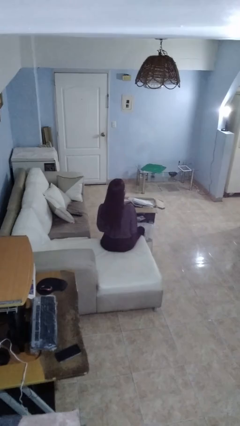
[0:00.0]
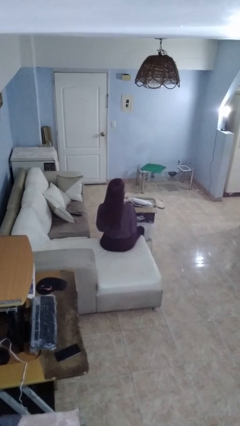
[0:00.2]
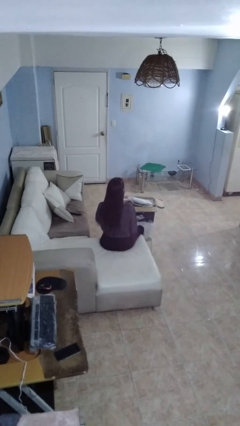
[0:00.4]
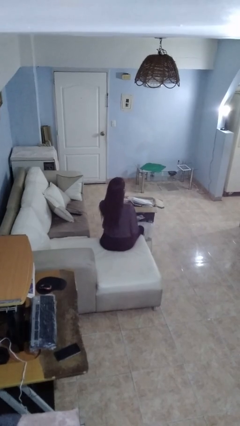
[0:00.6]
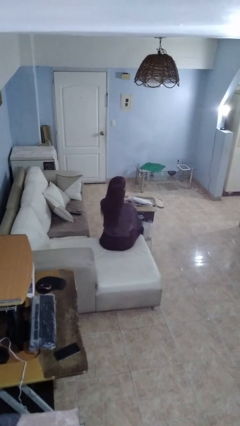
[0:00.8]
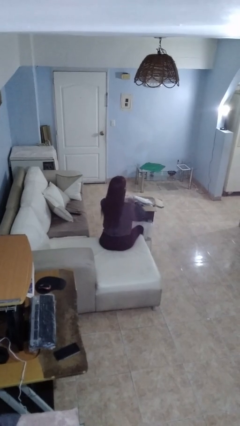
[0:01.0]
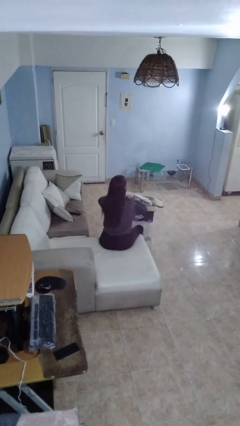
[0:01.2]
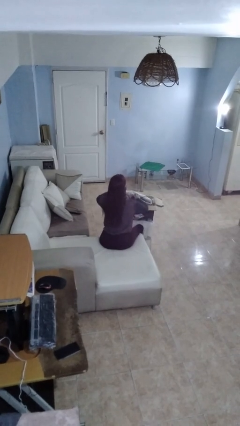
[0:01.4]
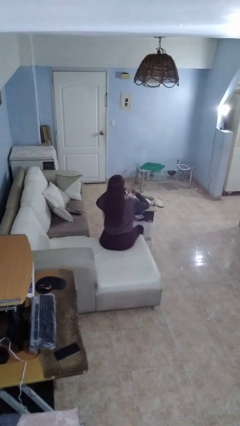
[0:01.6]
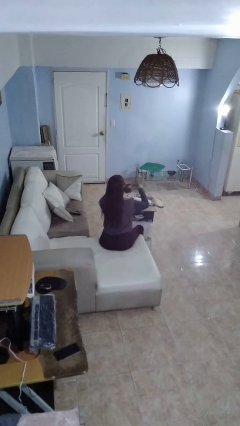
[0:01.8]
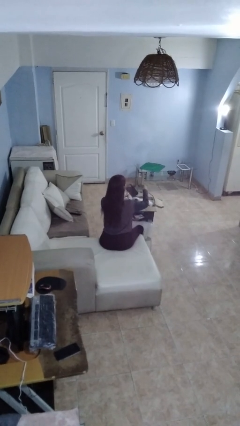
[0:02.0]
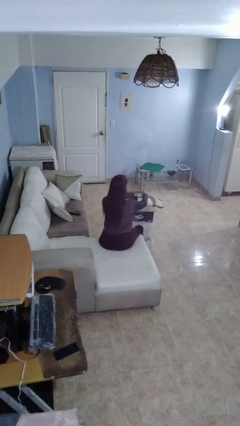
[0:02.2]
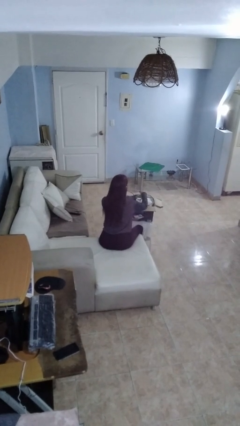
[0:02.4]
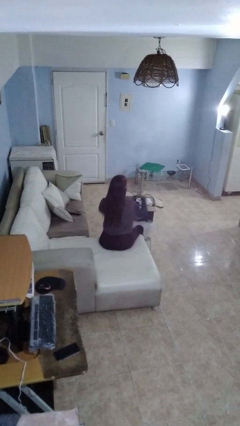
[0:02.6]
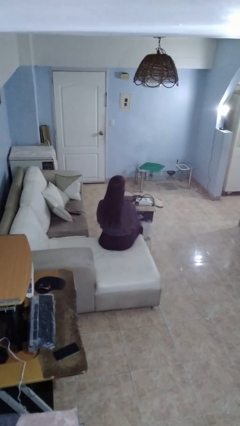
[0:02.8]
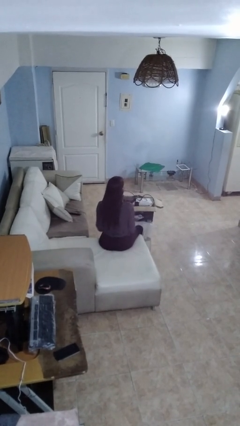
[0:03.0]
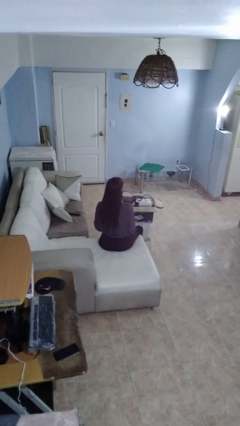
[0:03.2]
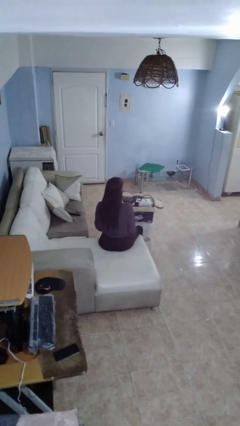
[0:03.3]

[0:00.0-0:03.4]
person searches in box

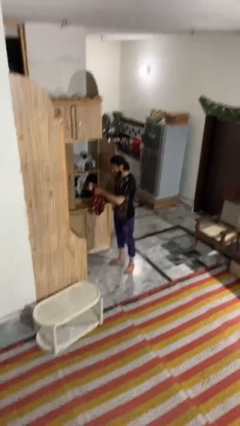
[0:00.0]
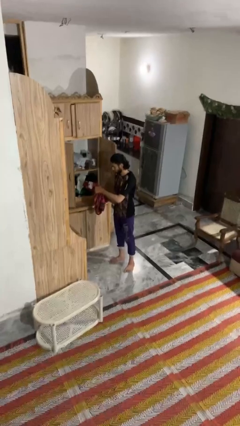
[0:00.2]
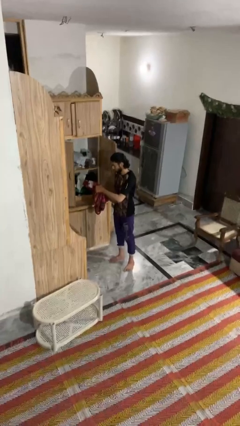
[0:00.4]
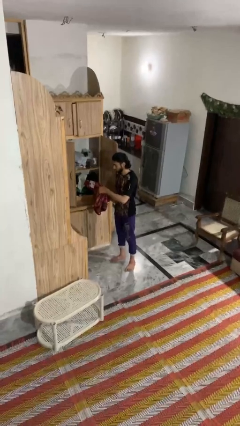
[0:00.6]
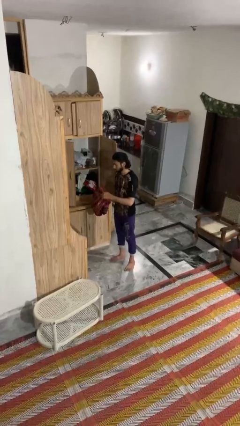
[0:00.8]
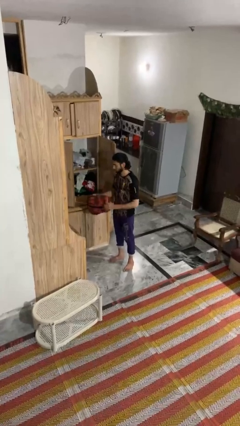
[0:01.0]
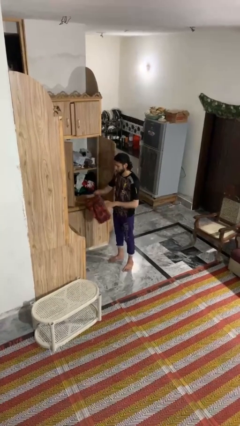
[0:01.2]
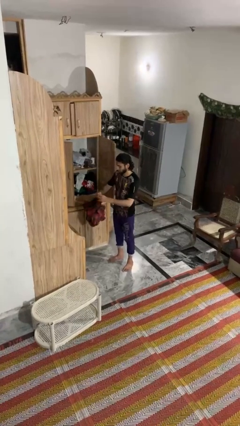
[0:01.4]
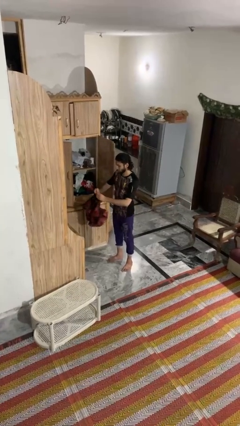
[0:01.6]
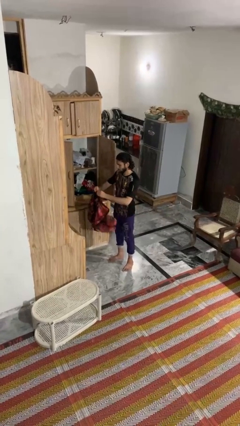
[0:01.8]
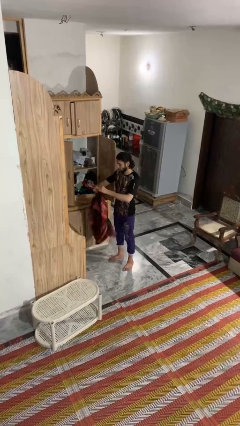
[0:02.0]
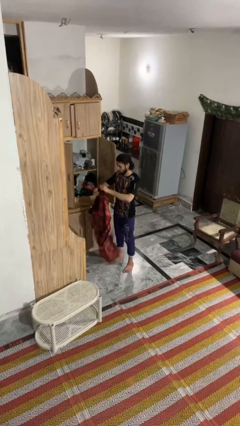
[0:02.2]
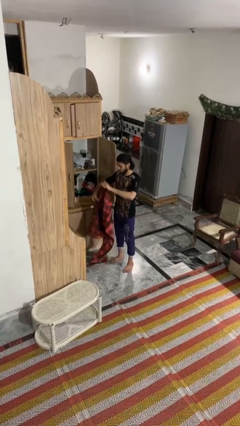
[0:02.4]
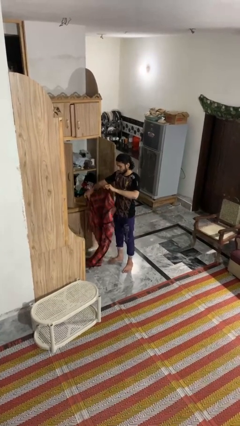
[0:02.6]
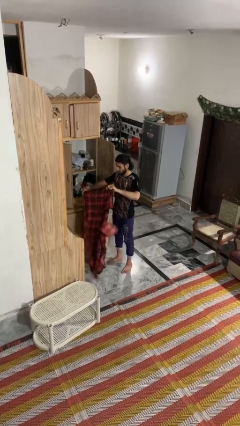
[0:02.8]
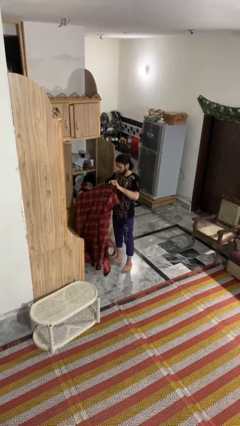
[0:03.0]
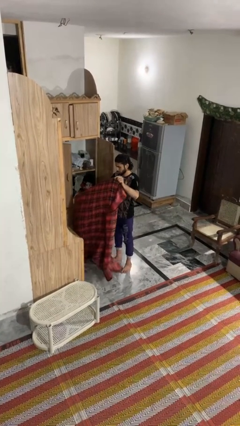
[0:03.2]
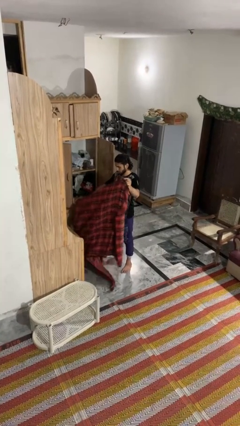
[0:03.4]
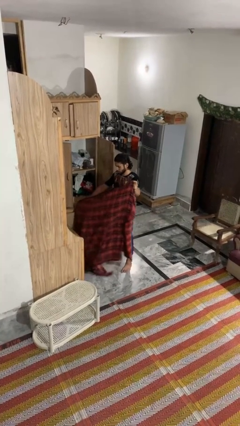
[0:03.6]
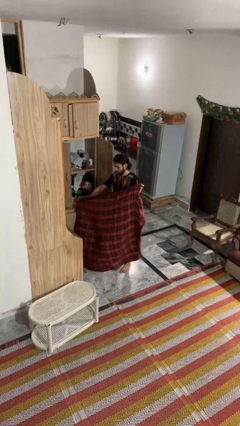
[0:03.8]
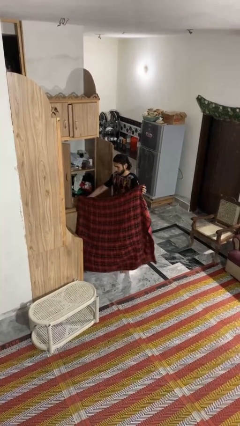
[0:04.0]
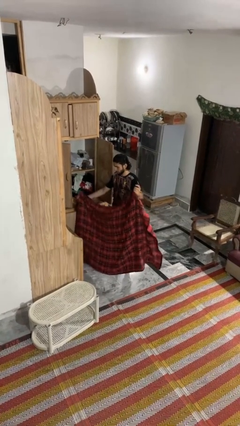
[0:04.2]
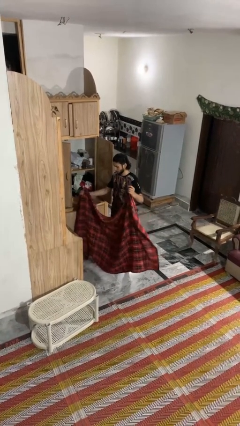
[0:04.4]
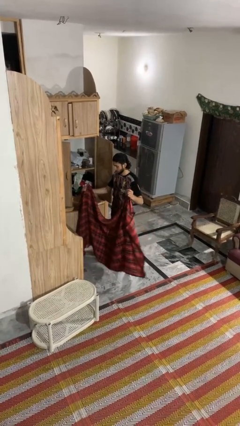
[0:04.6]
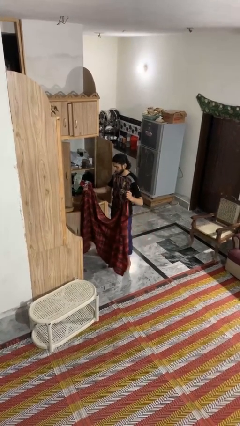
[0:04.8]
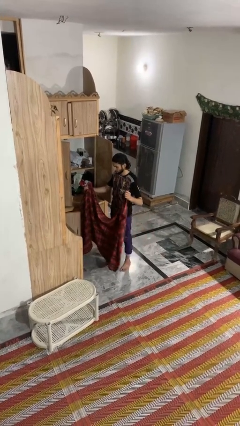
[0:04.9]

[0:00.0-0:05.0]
person unfolds blanket

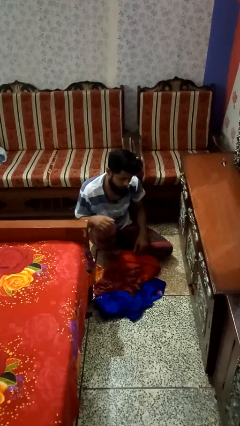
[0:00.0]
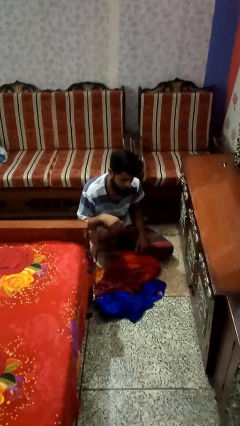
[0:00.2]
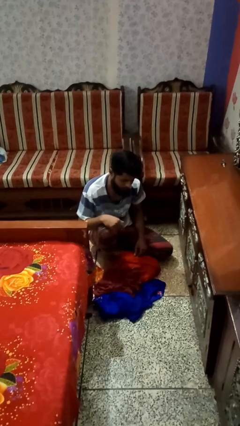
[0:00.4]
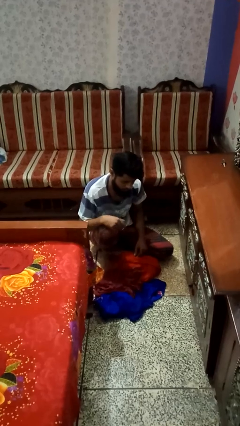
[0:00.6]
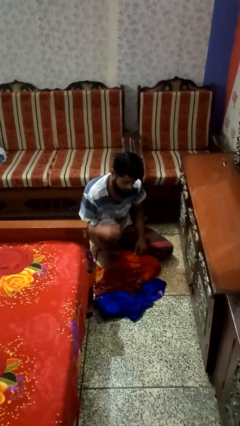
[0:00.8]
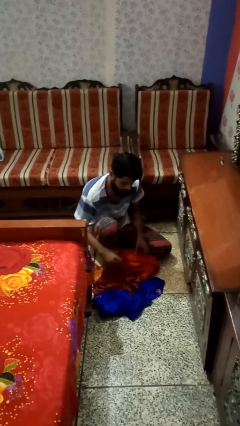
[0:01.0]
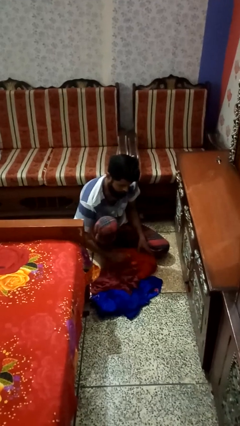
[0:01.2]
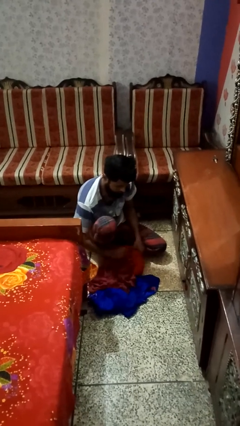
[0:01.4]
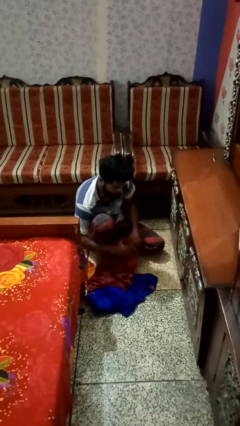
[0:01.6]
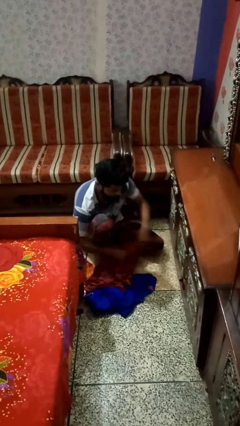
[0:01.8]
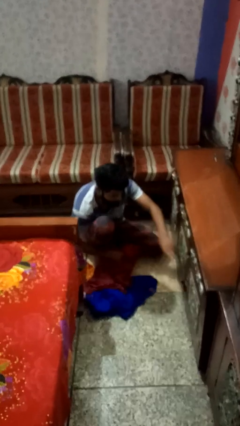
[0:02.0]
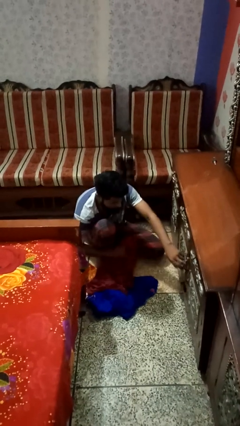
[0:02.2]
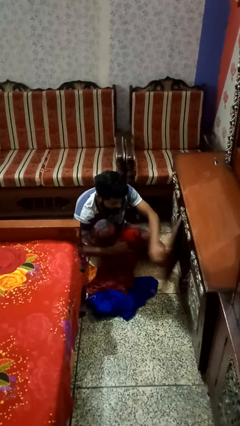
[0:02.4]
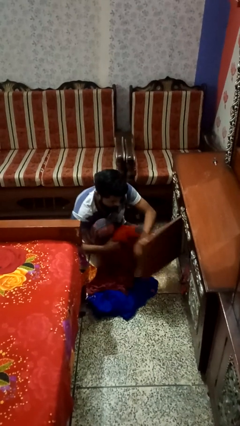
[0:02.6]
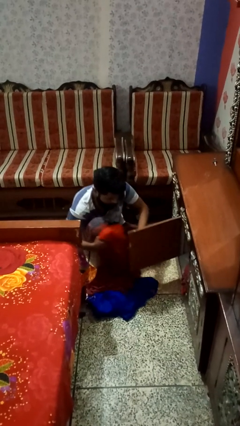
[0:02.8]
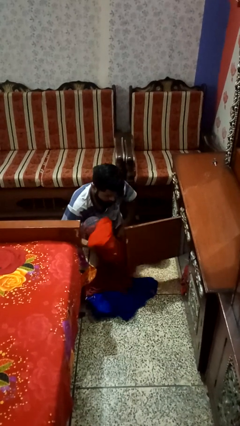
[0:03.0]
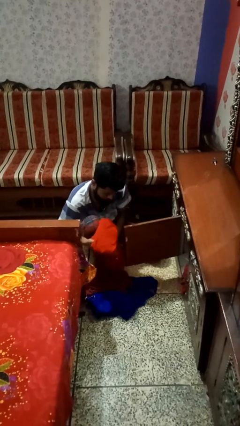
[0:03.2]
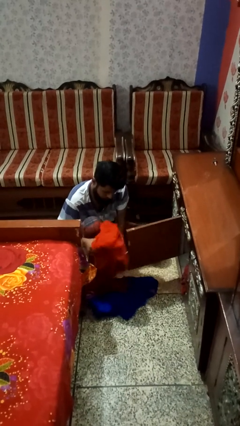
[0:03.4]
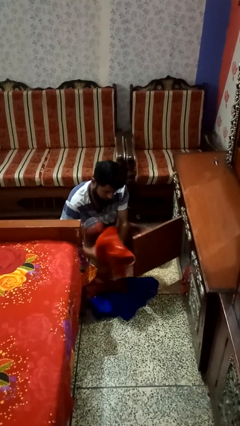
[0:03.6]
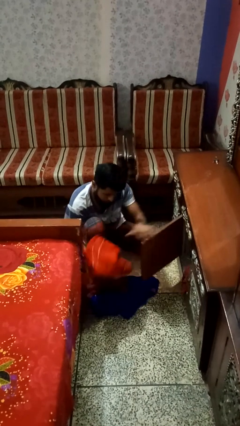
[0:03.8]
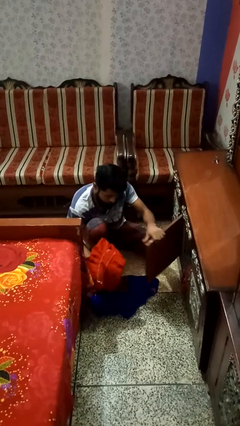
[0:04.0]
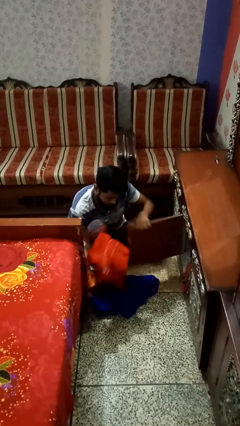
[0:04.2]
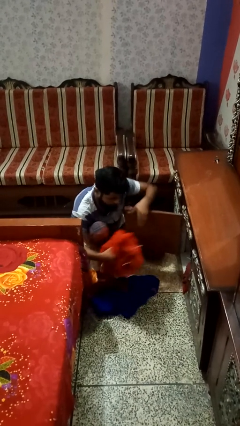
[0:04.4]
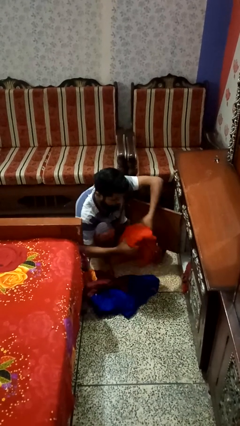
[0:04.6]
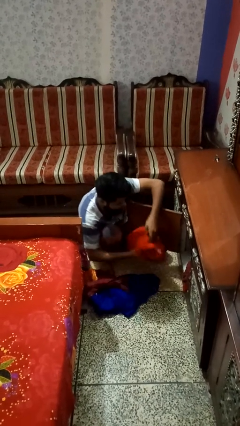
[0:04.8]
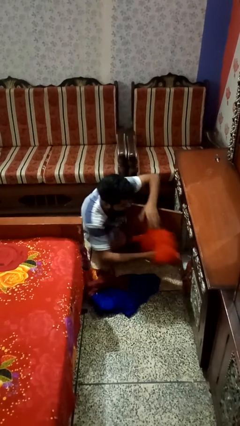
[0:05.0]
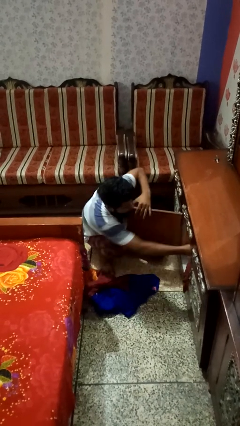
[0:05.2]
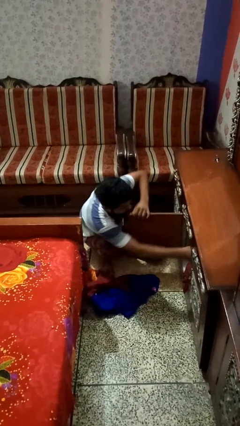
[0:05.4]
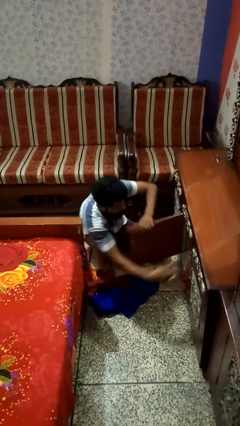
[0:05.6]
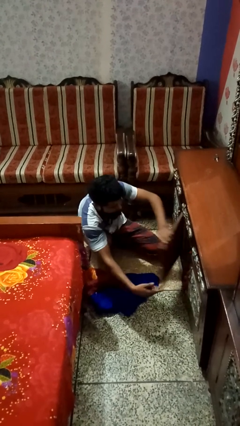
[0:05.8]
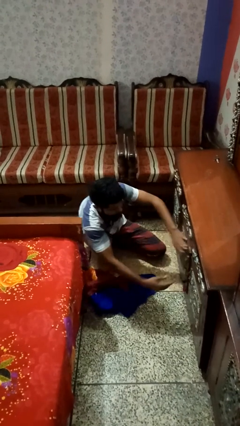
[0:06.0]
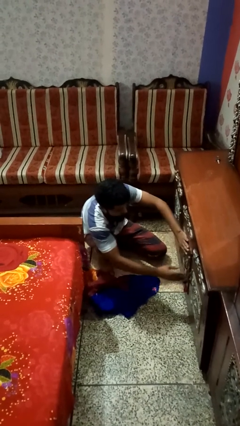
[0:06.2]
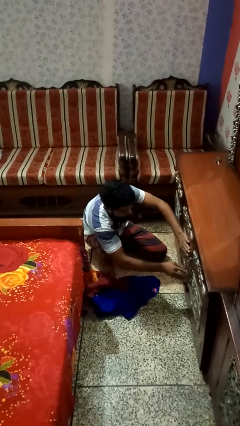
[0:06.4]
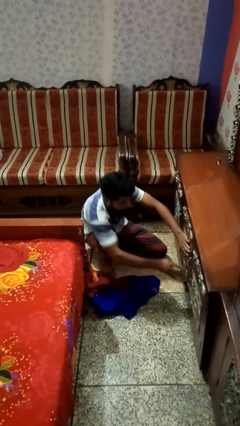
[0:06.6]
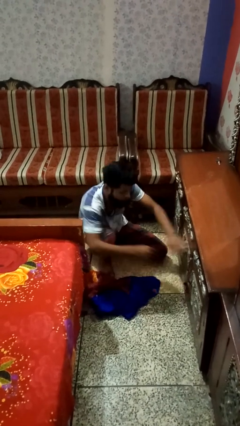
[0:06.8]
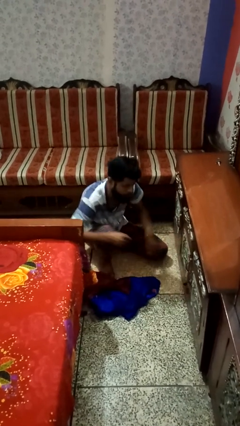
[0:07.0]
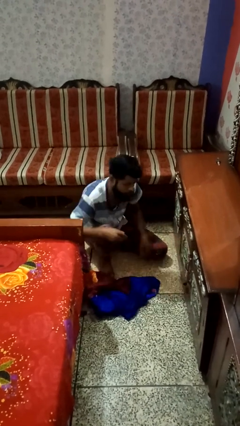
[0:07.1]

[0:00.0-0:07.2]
person puts clothes into dresser

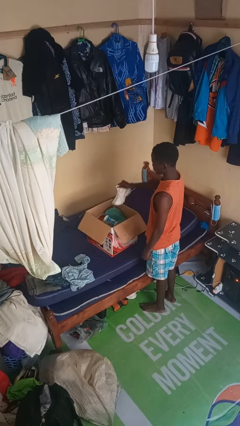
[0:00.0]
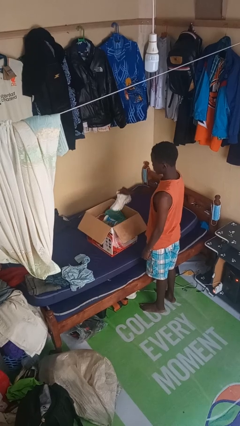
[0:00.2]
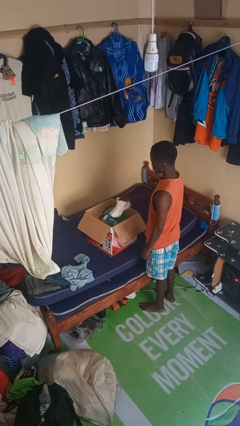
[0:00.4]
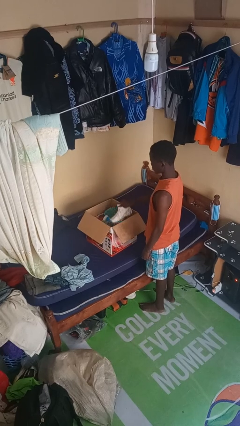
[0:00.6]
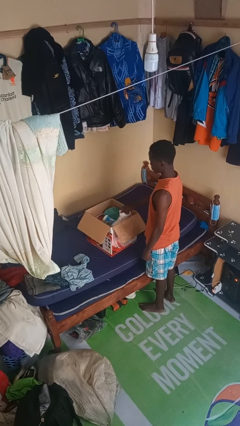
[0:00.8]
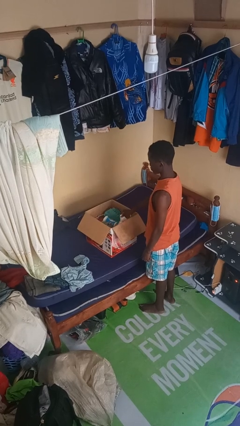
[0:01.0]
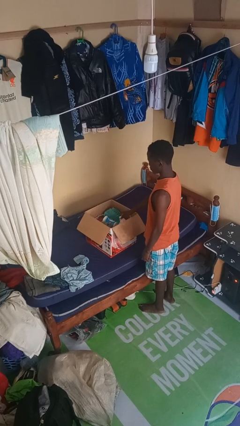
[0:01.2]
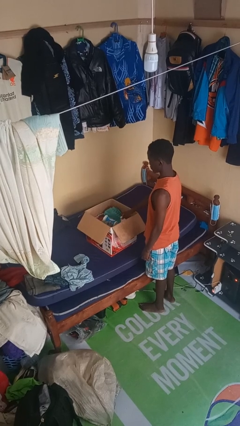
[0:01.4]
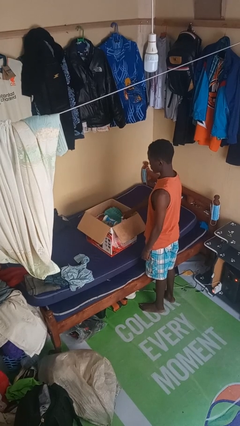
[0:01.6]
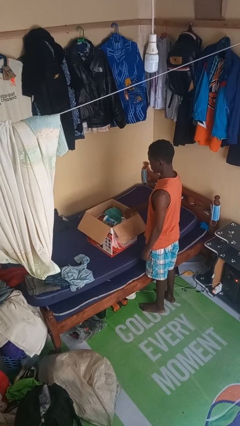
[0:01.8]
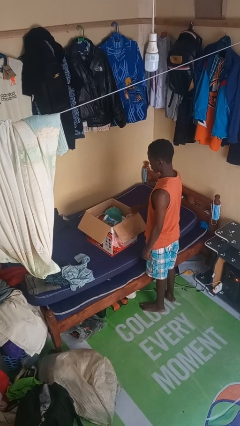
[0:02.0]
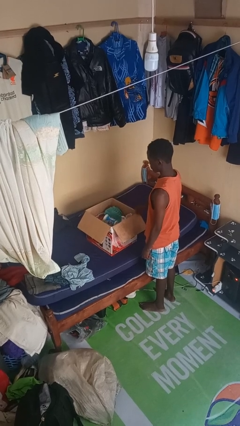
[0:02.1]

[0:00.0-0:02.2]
person puts object into box
